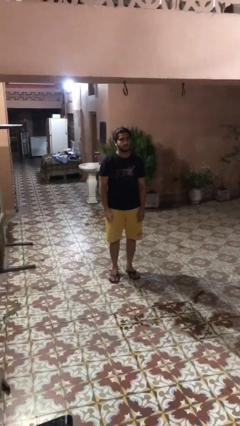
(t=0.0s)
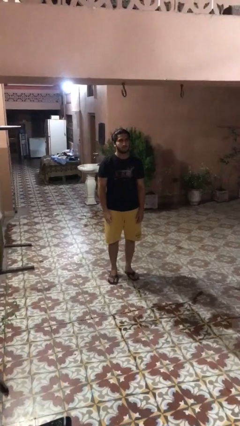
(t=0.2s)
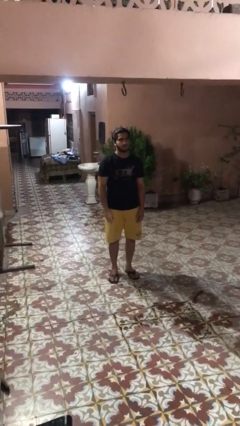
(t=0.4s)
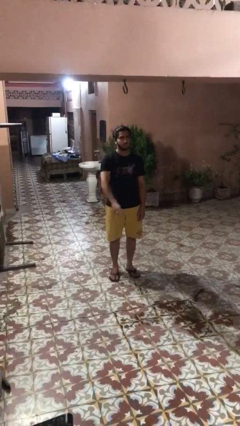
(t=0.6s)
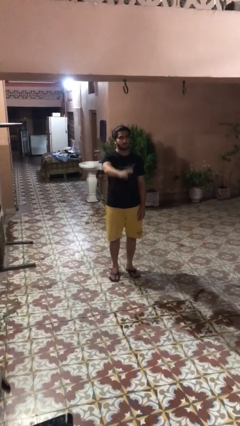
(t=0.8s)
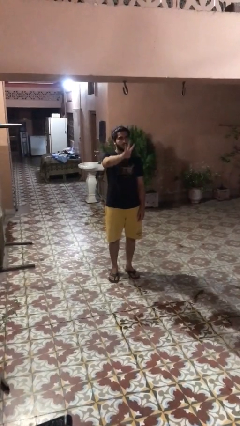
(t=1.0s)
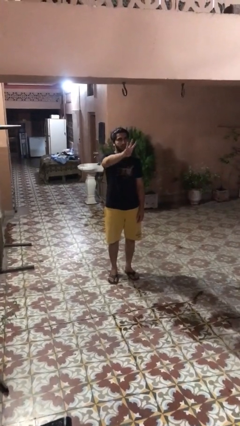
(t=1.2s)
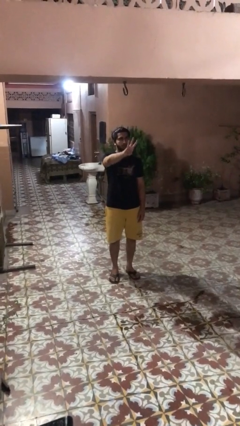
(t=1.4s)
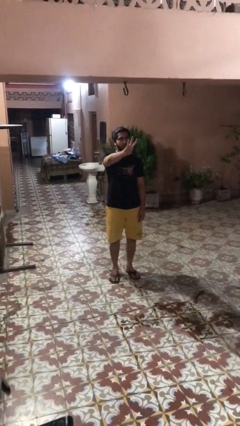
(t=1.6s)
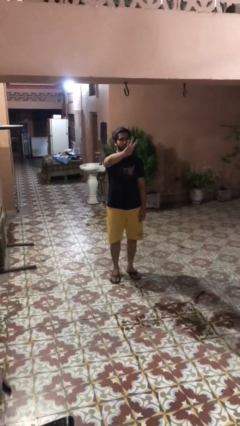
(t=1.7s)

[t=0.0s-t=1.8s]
person gestures number three

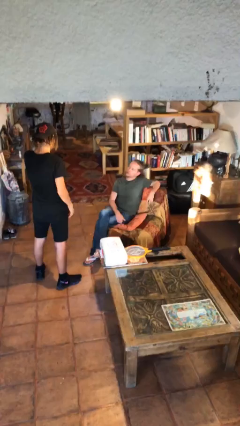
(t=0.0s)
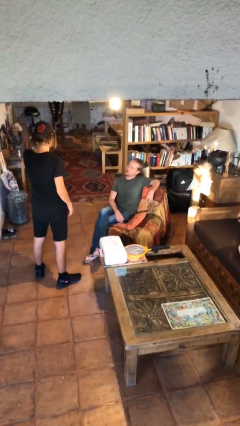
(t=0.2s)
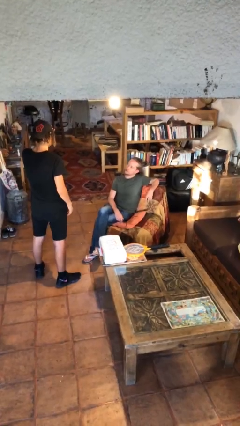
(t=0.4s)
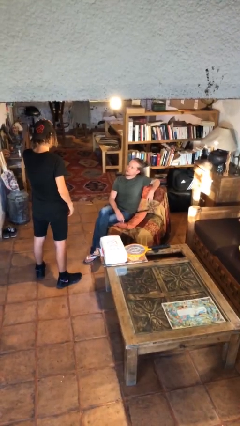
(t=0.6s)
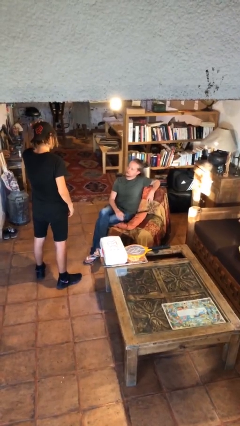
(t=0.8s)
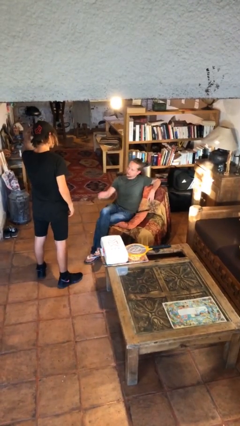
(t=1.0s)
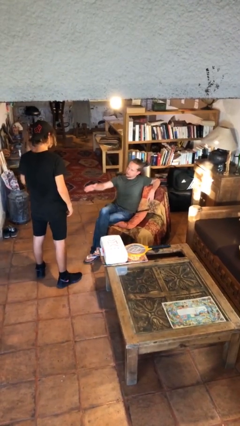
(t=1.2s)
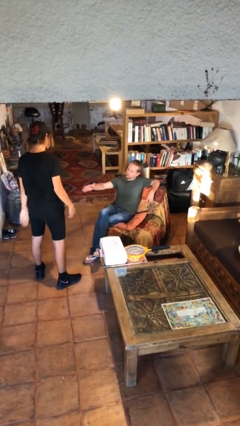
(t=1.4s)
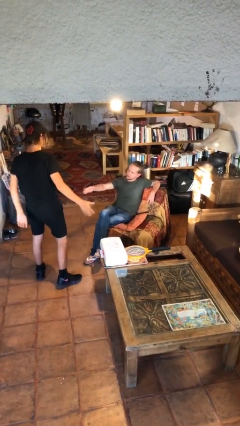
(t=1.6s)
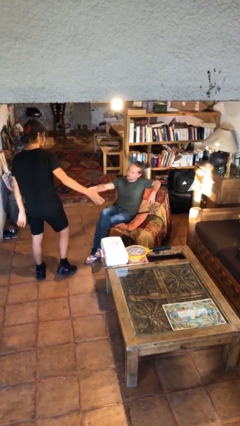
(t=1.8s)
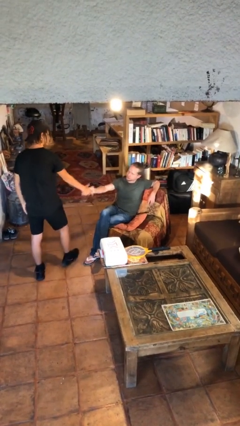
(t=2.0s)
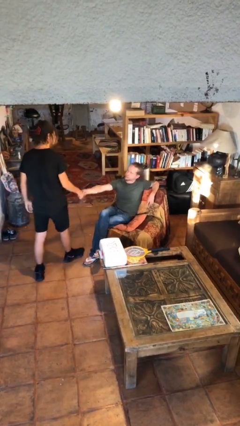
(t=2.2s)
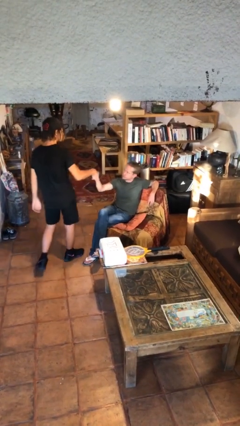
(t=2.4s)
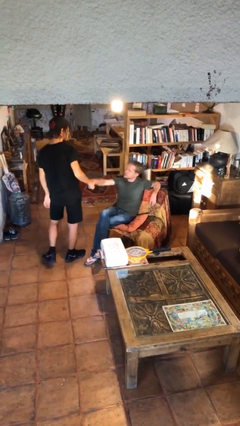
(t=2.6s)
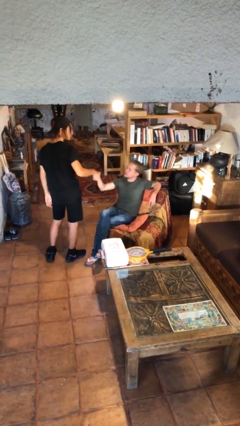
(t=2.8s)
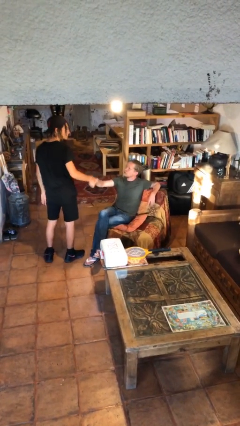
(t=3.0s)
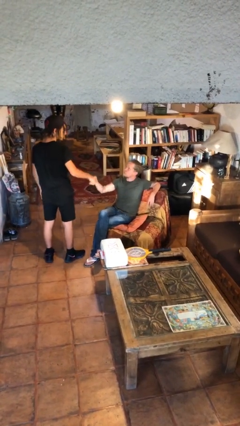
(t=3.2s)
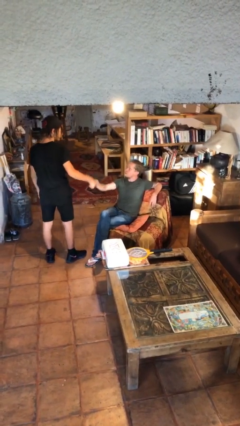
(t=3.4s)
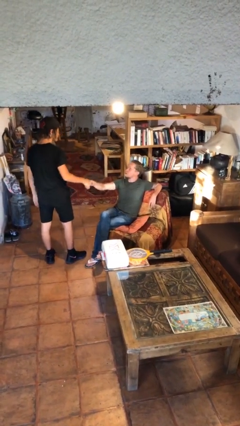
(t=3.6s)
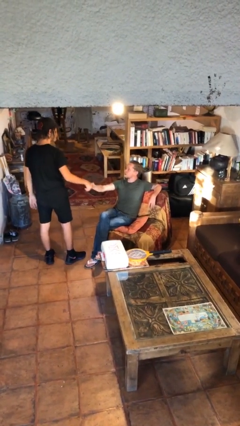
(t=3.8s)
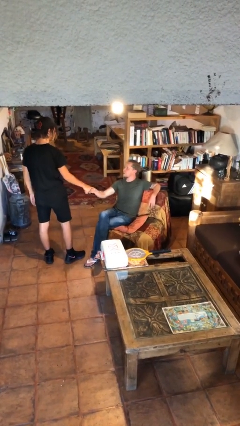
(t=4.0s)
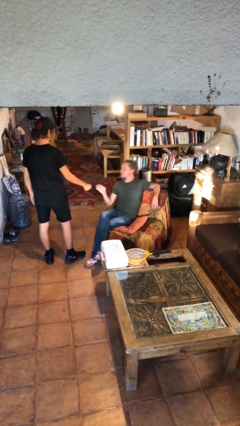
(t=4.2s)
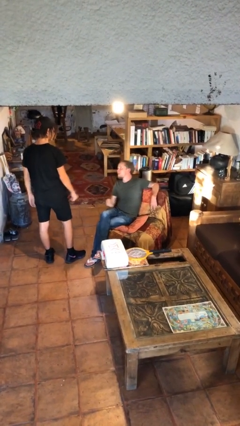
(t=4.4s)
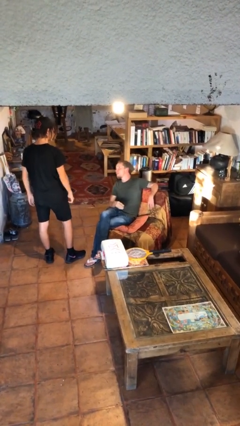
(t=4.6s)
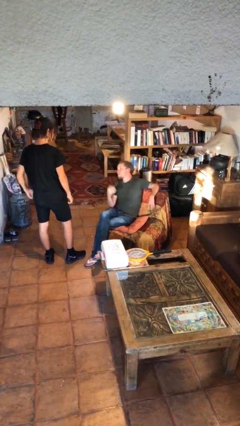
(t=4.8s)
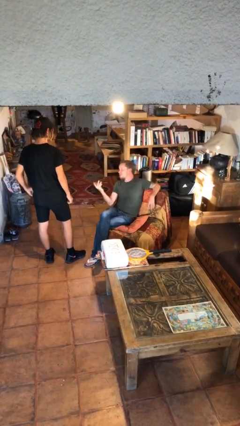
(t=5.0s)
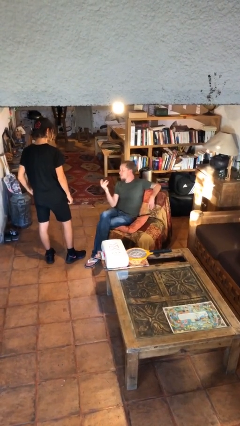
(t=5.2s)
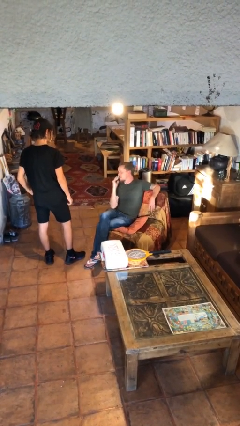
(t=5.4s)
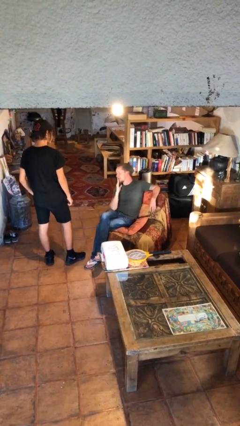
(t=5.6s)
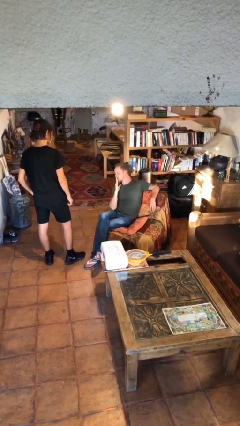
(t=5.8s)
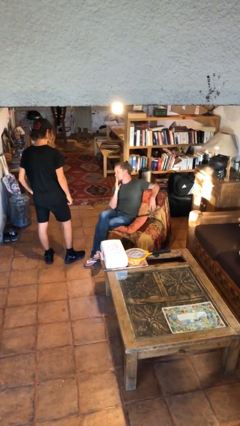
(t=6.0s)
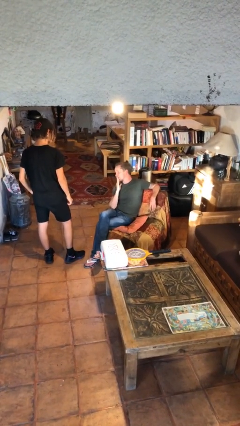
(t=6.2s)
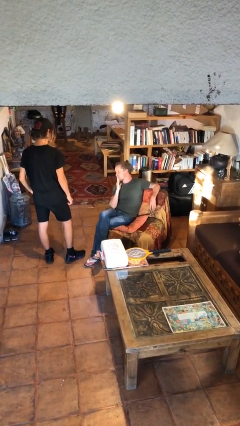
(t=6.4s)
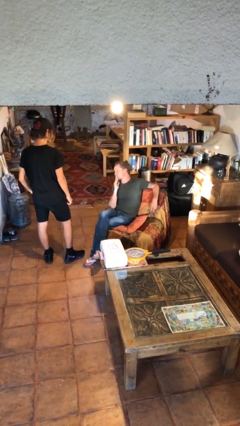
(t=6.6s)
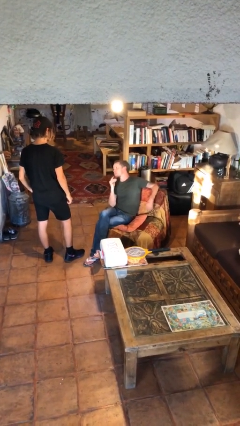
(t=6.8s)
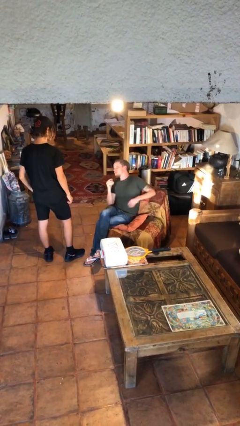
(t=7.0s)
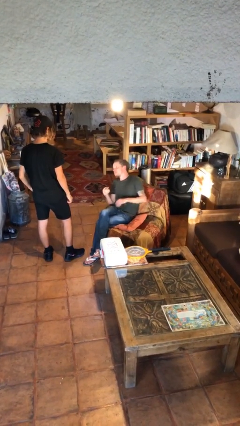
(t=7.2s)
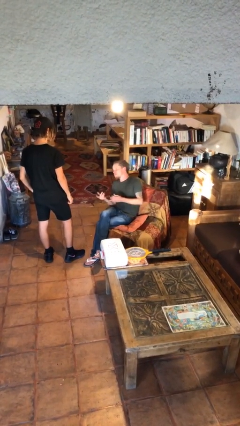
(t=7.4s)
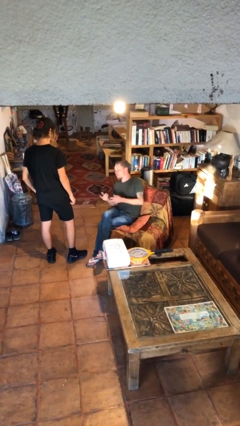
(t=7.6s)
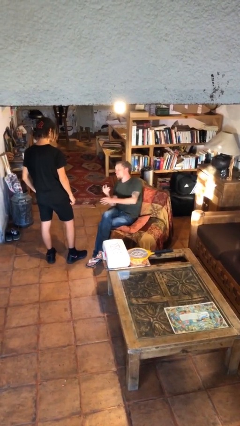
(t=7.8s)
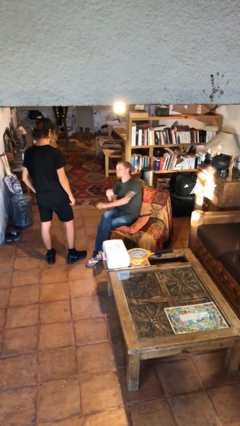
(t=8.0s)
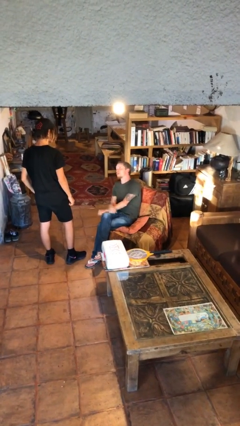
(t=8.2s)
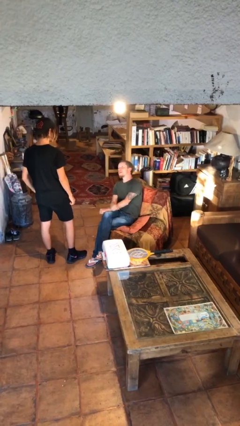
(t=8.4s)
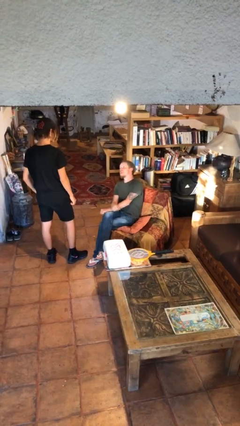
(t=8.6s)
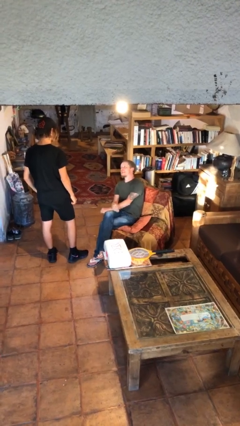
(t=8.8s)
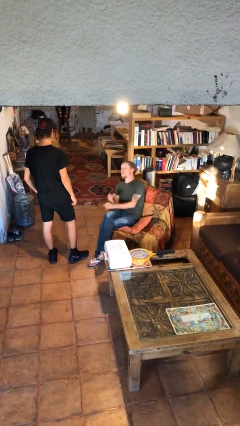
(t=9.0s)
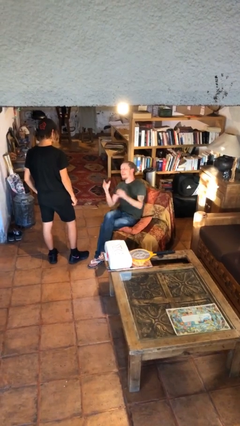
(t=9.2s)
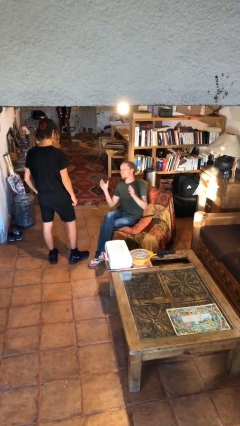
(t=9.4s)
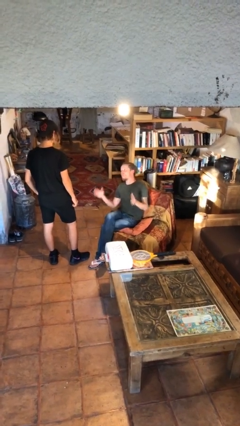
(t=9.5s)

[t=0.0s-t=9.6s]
person shakes hand

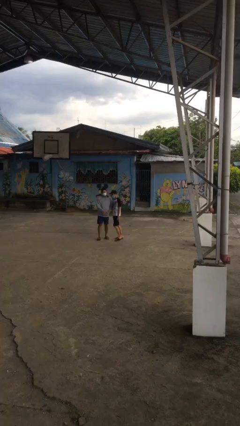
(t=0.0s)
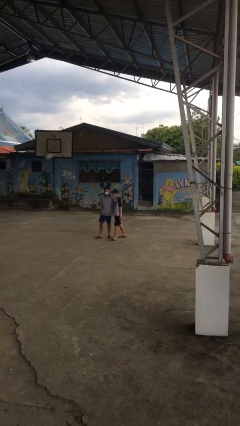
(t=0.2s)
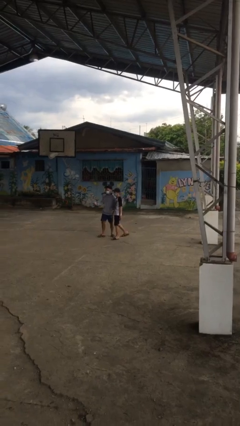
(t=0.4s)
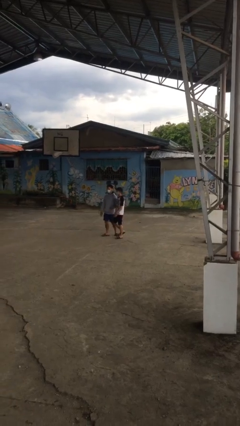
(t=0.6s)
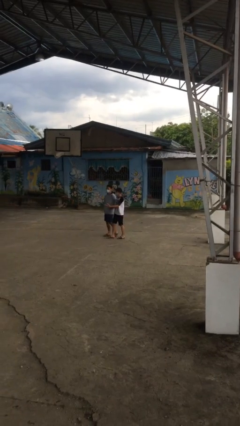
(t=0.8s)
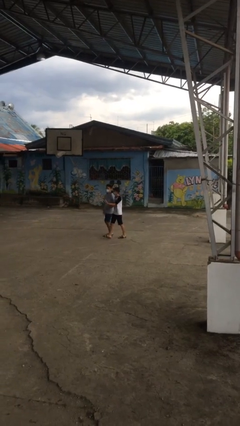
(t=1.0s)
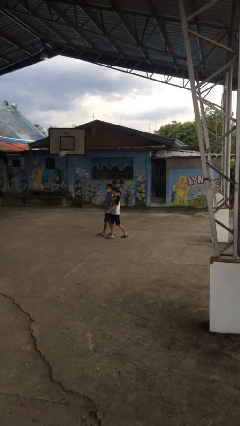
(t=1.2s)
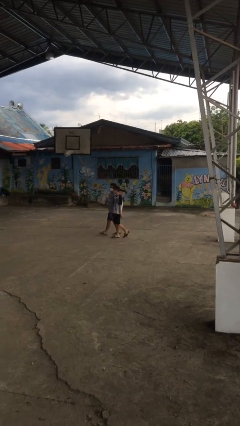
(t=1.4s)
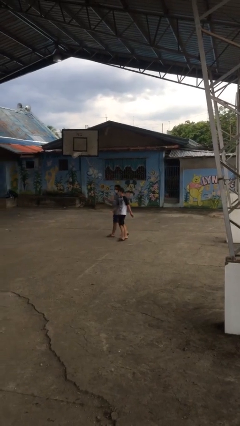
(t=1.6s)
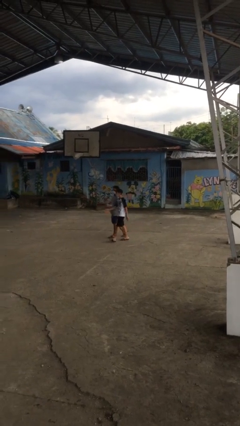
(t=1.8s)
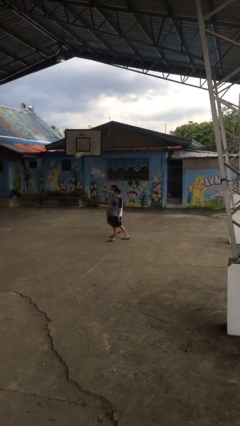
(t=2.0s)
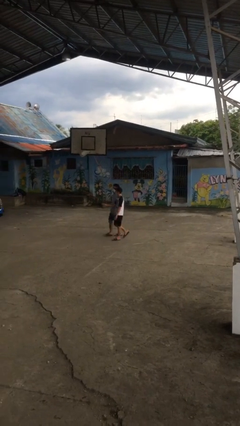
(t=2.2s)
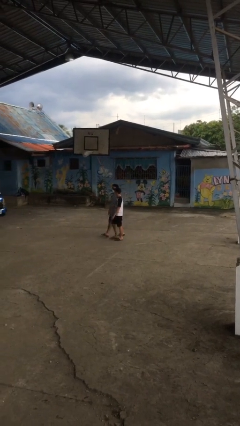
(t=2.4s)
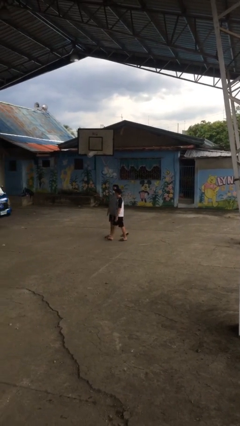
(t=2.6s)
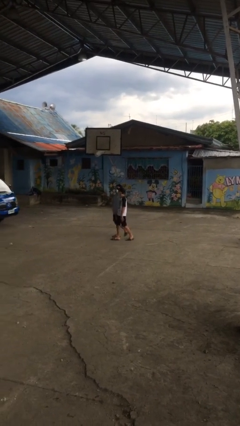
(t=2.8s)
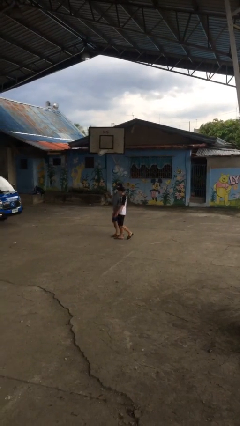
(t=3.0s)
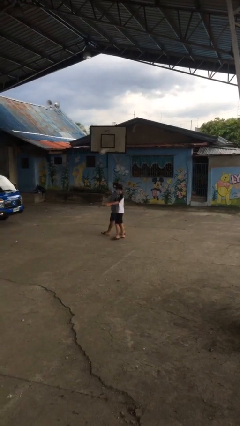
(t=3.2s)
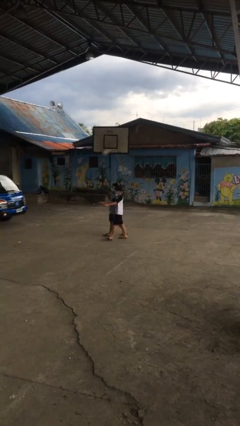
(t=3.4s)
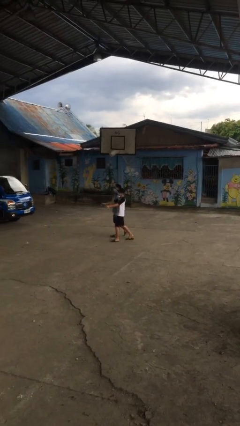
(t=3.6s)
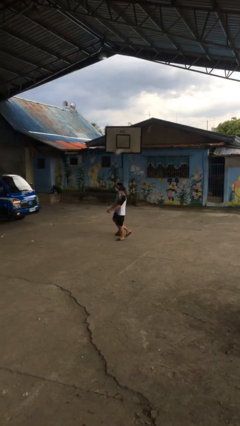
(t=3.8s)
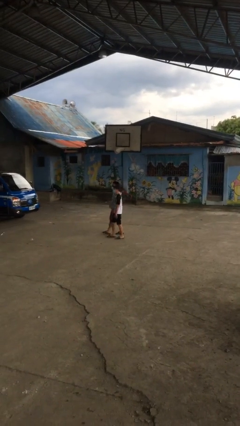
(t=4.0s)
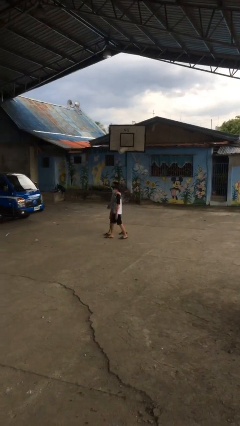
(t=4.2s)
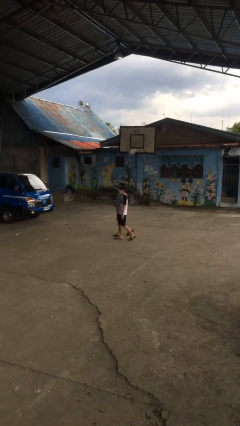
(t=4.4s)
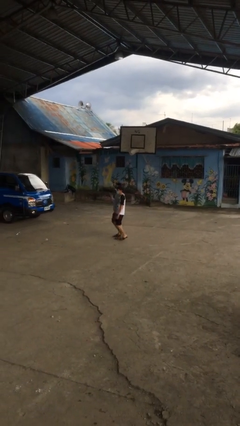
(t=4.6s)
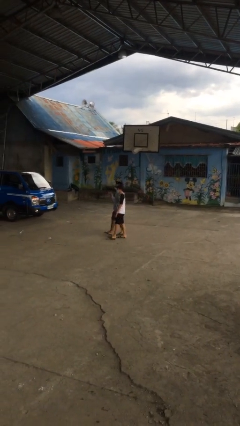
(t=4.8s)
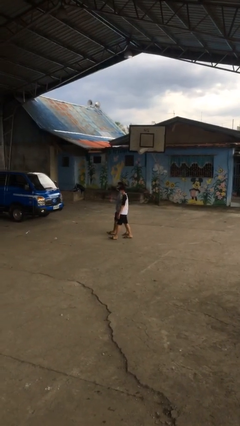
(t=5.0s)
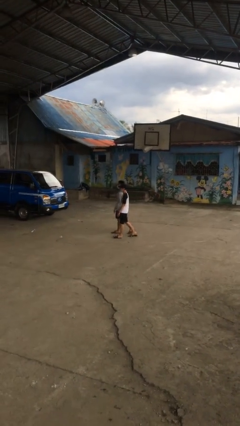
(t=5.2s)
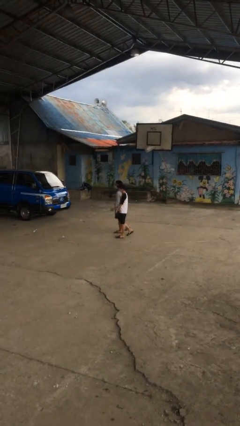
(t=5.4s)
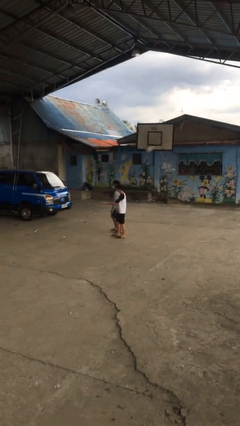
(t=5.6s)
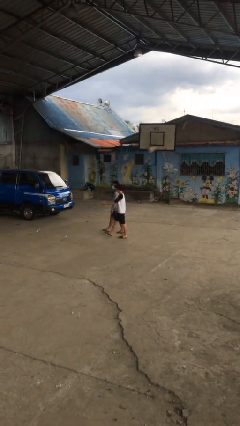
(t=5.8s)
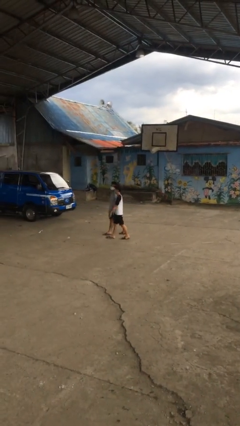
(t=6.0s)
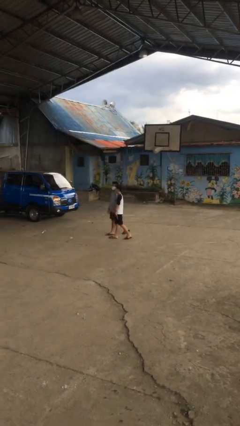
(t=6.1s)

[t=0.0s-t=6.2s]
person talks to person

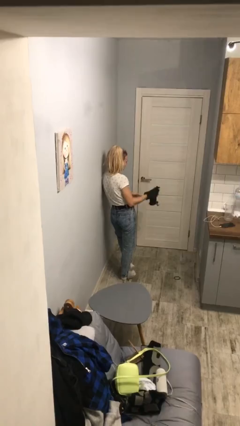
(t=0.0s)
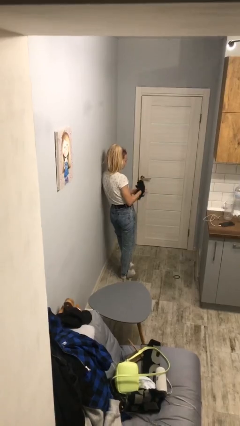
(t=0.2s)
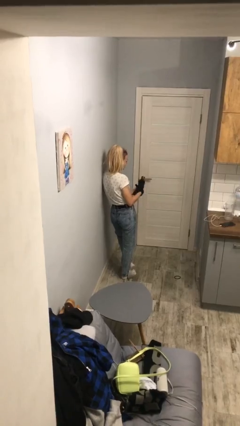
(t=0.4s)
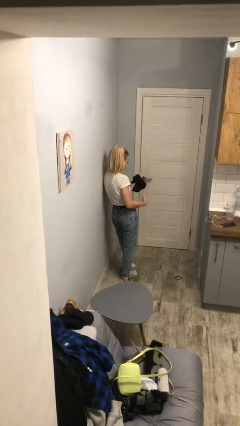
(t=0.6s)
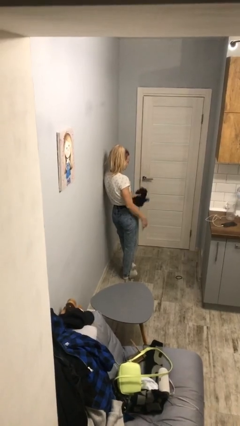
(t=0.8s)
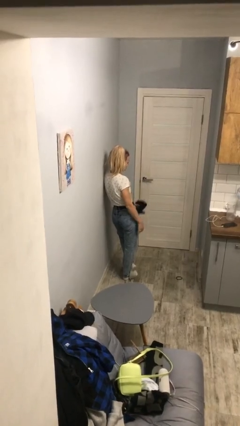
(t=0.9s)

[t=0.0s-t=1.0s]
person takes off gloves
